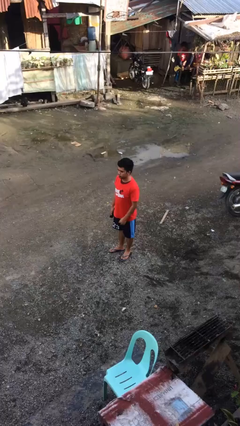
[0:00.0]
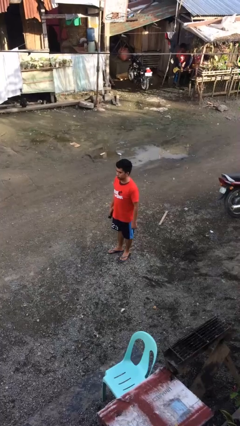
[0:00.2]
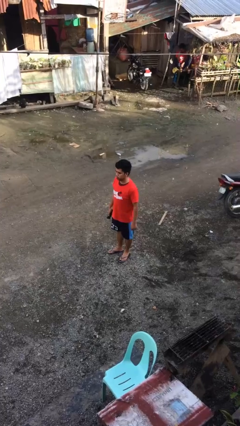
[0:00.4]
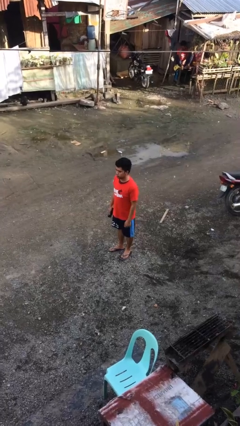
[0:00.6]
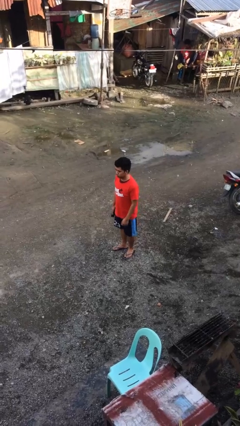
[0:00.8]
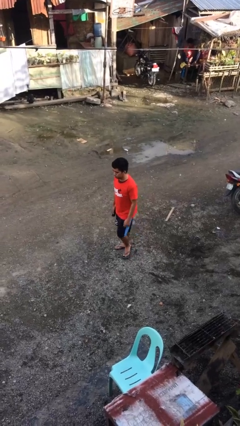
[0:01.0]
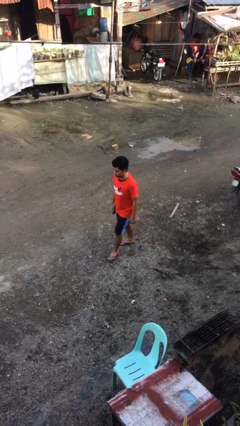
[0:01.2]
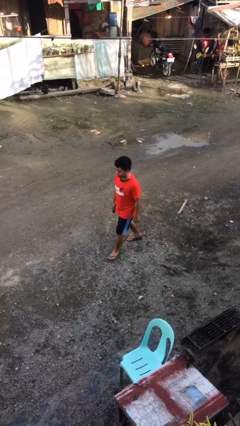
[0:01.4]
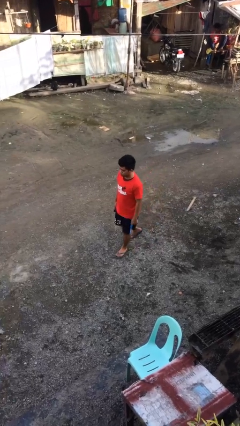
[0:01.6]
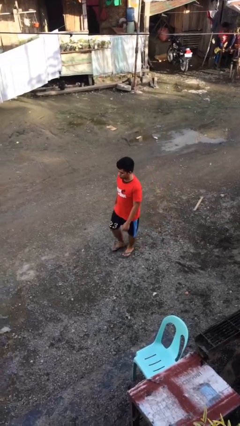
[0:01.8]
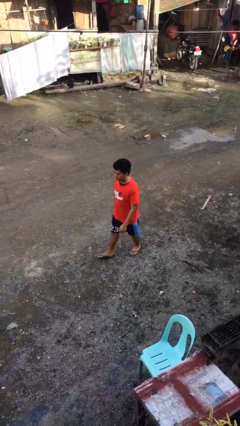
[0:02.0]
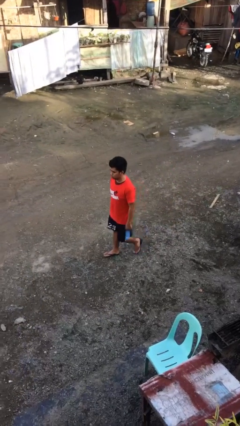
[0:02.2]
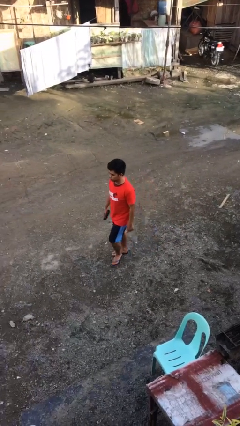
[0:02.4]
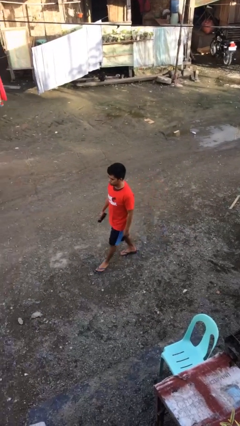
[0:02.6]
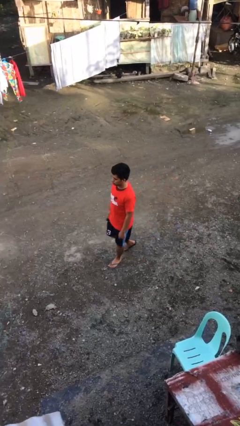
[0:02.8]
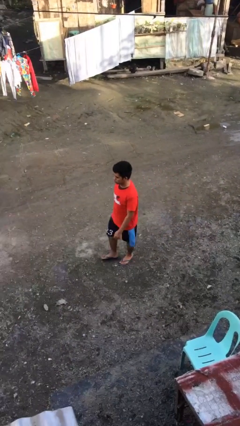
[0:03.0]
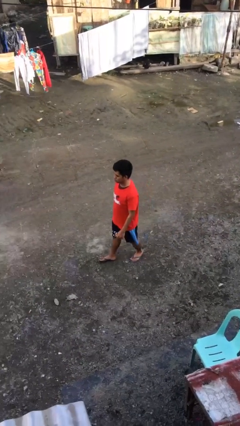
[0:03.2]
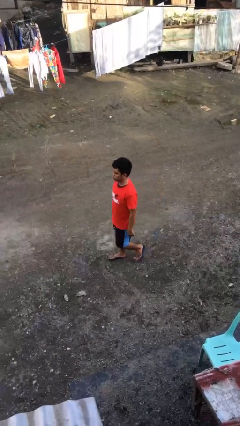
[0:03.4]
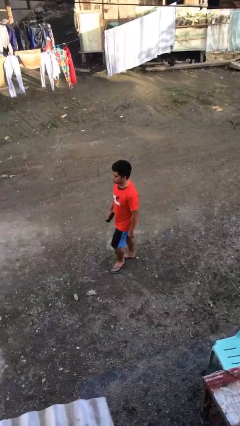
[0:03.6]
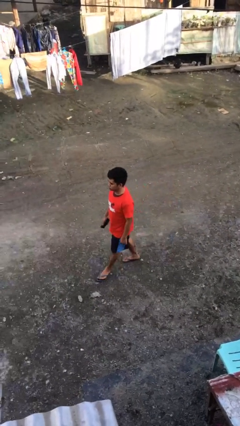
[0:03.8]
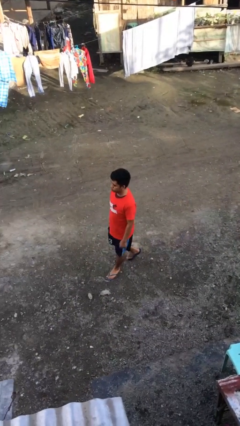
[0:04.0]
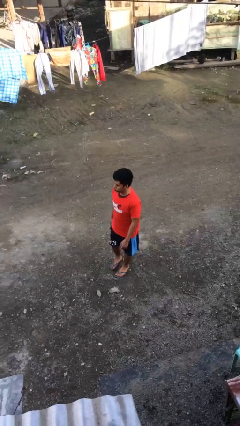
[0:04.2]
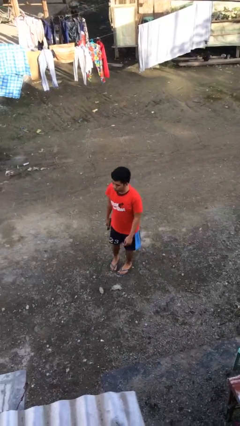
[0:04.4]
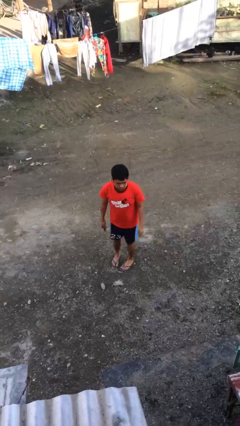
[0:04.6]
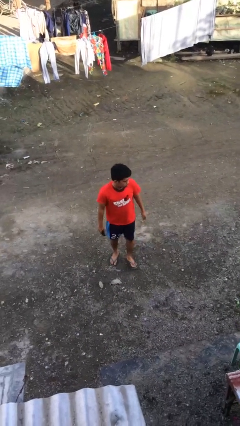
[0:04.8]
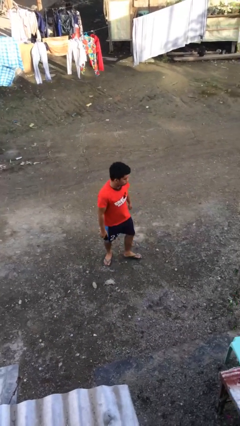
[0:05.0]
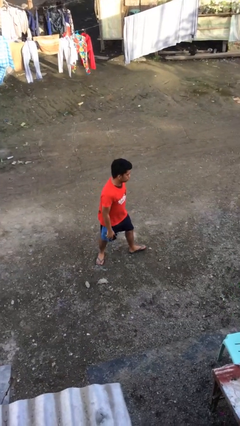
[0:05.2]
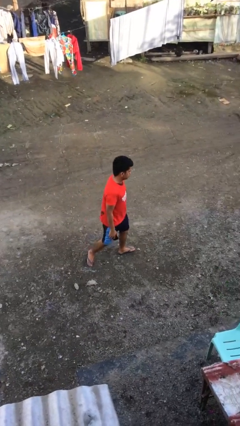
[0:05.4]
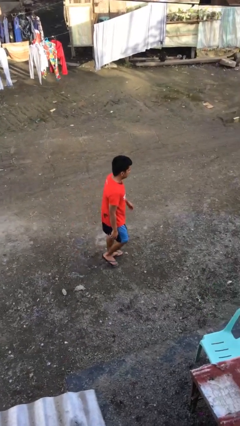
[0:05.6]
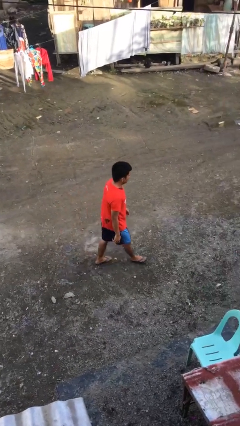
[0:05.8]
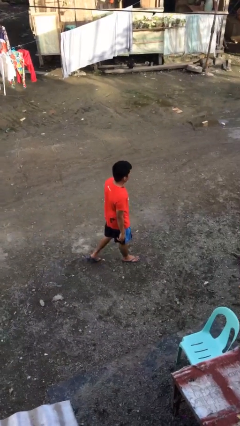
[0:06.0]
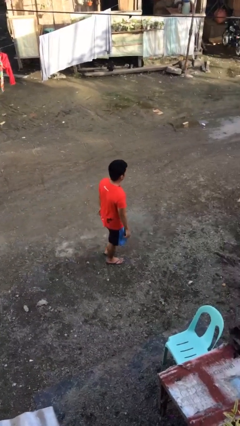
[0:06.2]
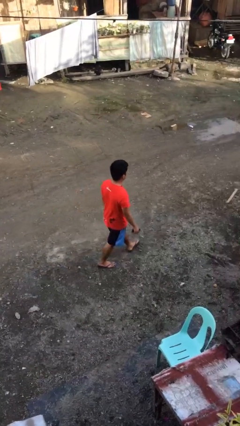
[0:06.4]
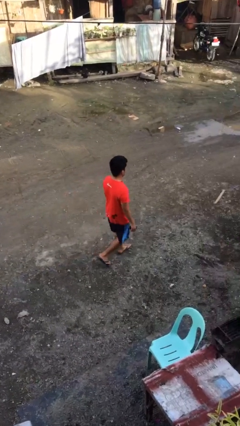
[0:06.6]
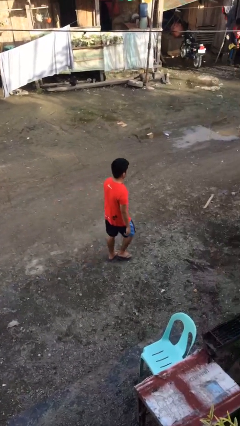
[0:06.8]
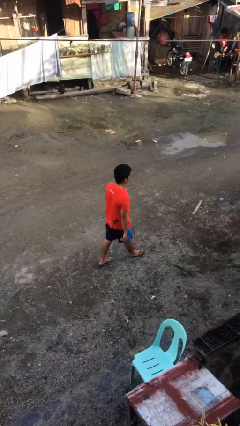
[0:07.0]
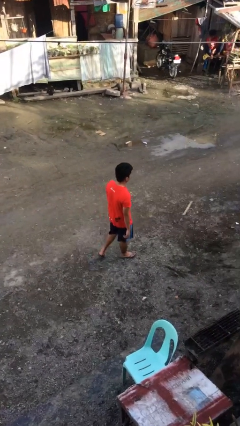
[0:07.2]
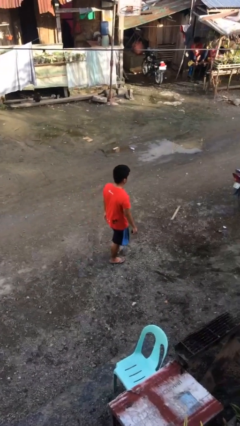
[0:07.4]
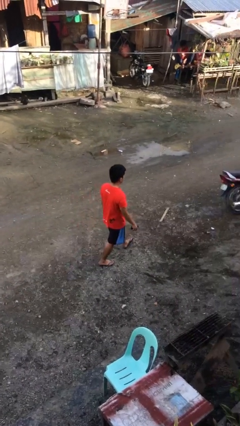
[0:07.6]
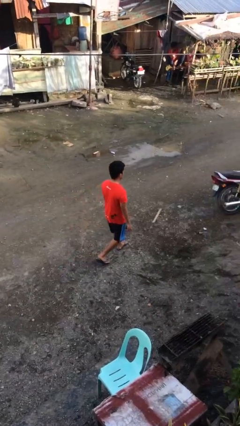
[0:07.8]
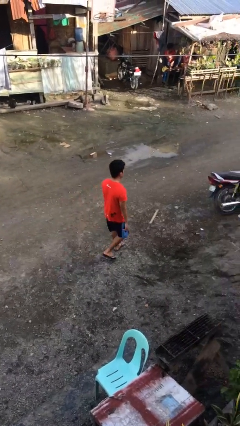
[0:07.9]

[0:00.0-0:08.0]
person walks

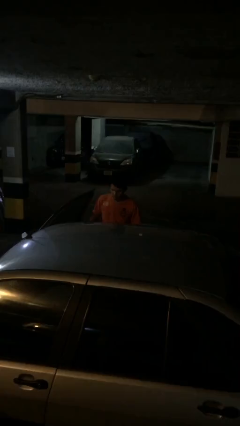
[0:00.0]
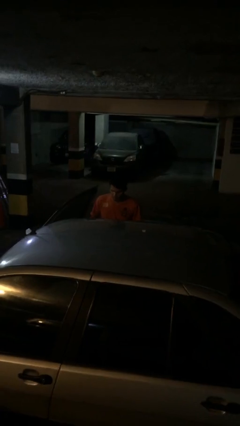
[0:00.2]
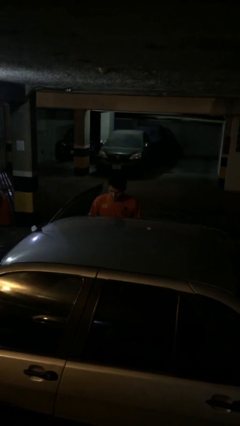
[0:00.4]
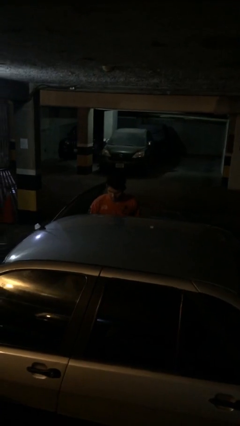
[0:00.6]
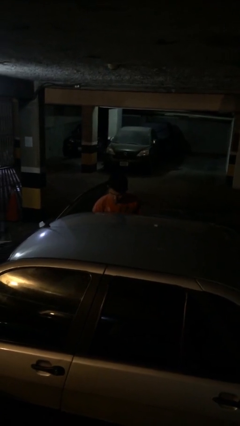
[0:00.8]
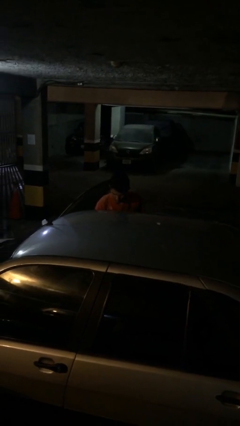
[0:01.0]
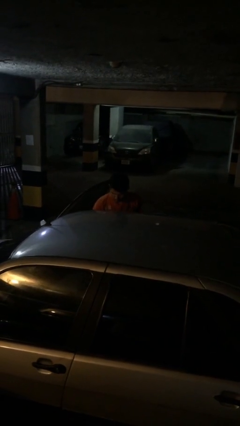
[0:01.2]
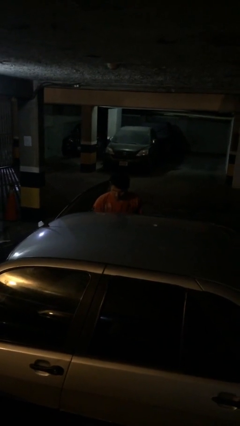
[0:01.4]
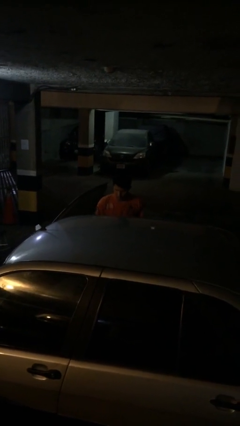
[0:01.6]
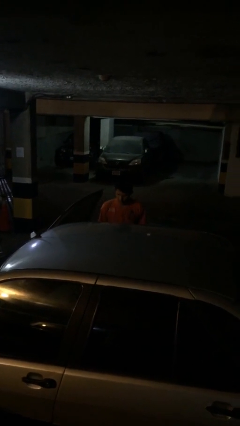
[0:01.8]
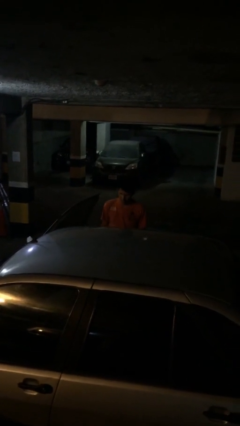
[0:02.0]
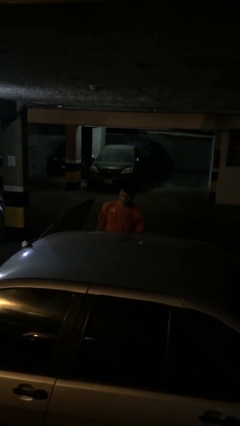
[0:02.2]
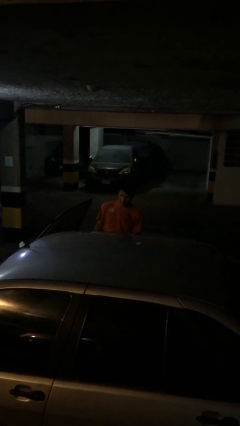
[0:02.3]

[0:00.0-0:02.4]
person loads car

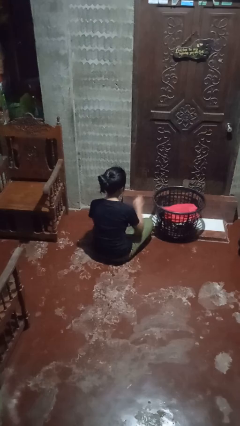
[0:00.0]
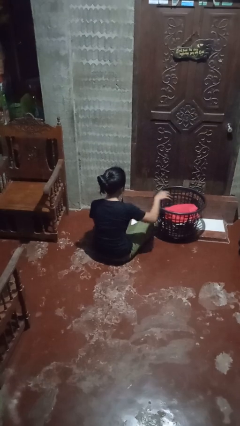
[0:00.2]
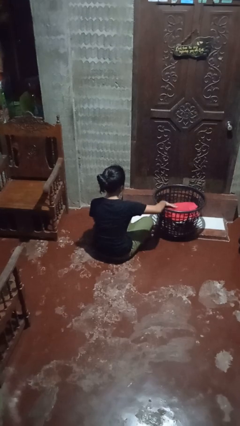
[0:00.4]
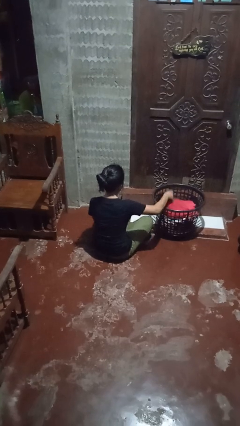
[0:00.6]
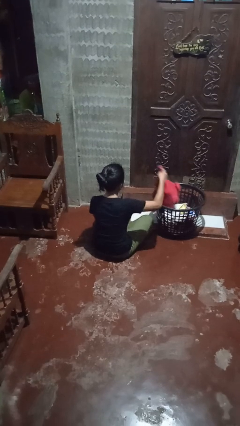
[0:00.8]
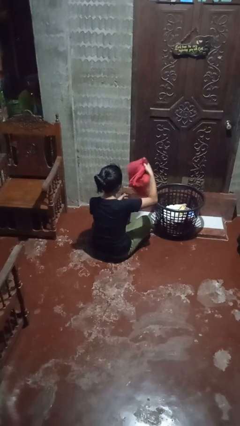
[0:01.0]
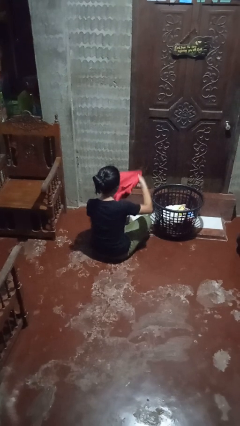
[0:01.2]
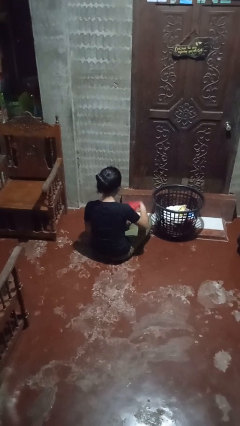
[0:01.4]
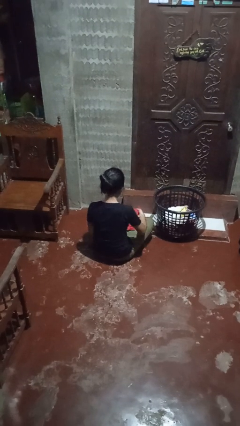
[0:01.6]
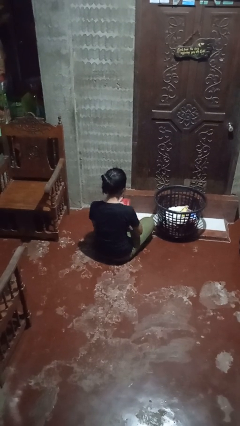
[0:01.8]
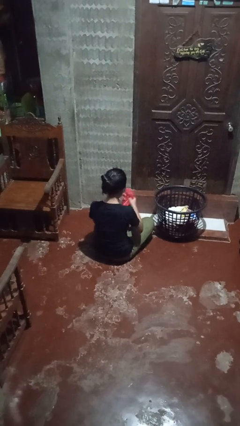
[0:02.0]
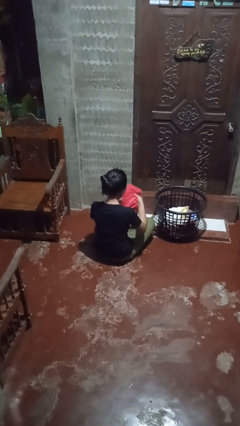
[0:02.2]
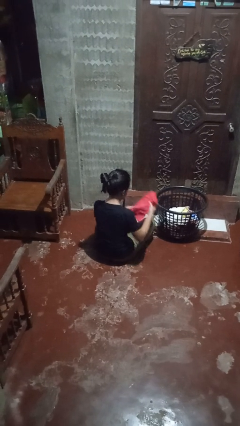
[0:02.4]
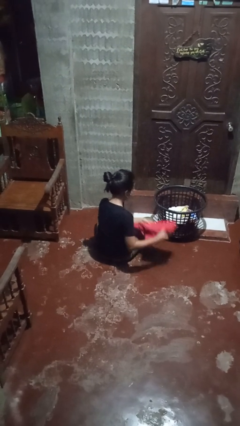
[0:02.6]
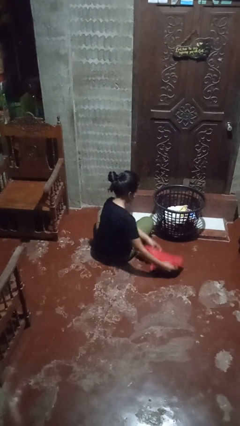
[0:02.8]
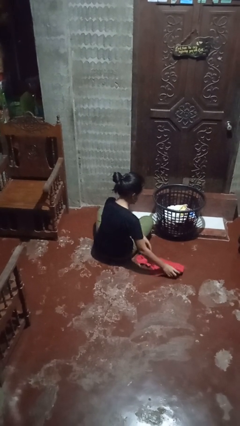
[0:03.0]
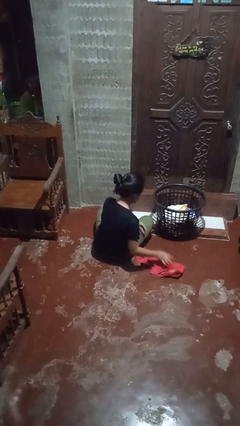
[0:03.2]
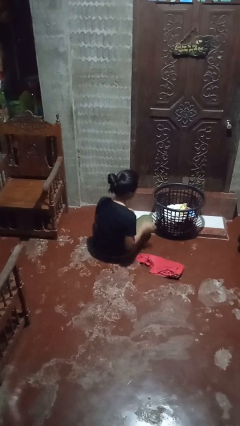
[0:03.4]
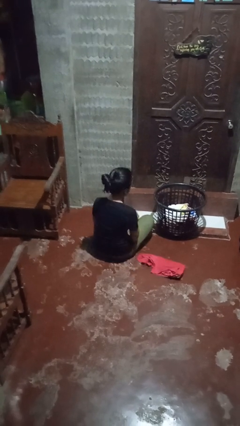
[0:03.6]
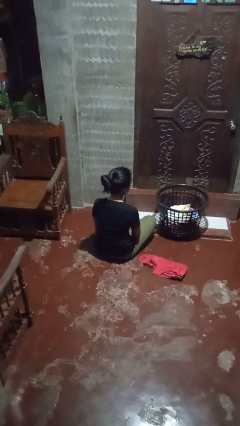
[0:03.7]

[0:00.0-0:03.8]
person folds shirt

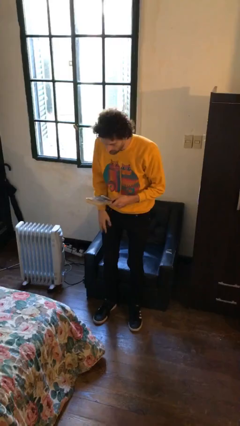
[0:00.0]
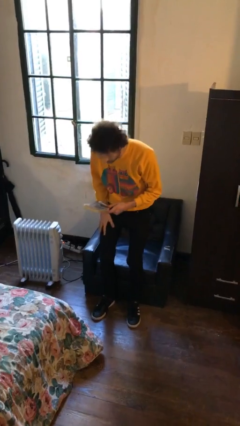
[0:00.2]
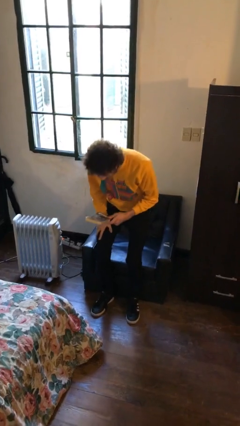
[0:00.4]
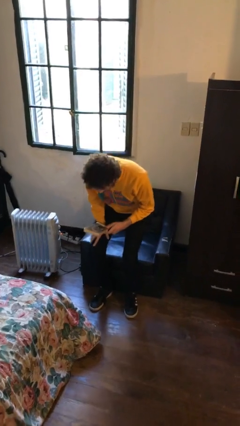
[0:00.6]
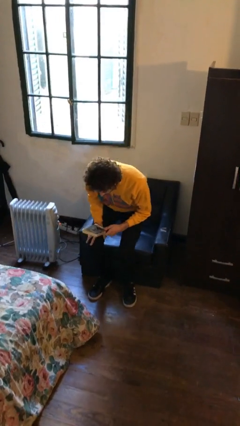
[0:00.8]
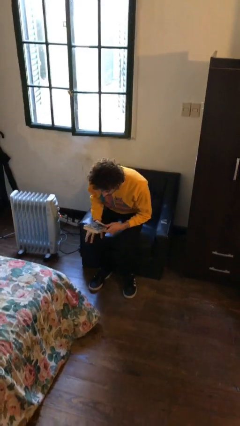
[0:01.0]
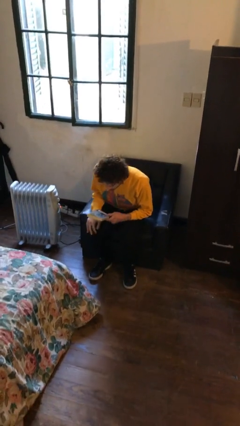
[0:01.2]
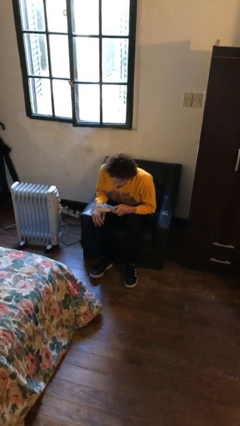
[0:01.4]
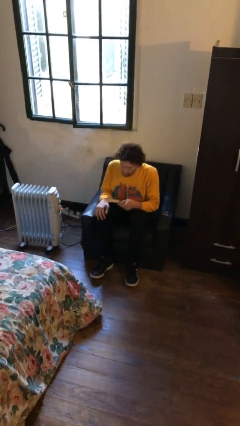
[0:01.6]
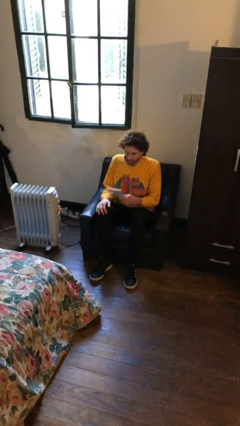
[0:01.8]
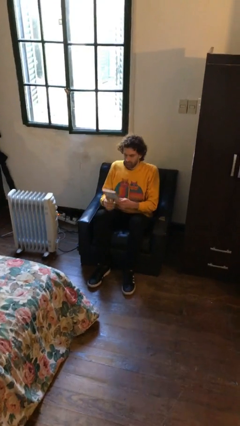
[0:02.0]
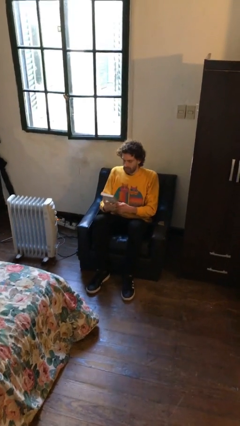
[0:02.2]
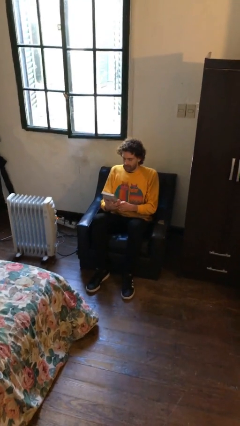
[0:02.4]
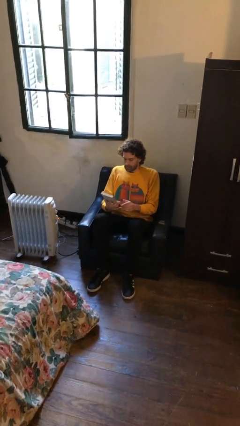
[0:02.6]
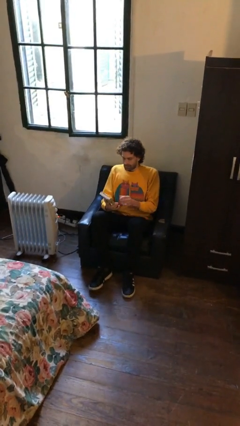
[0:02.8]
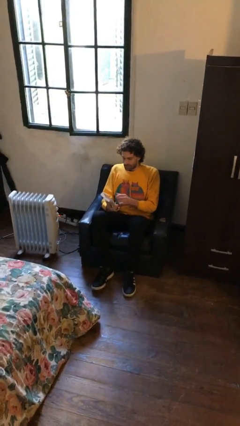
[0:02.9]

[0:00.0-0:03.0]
person sits down
